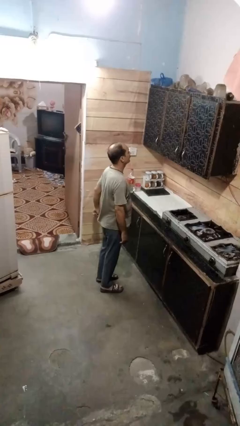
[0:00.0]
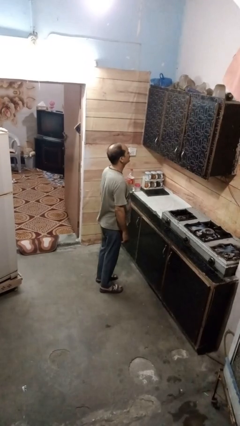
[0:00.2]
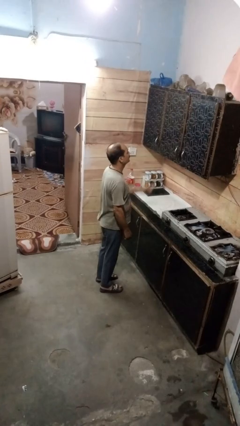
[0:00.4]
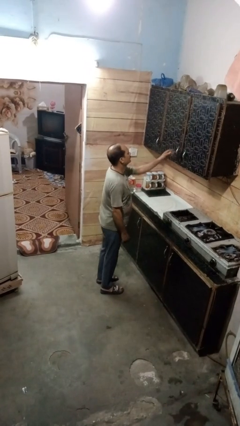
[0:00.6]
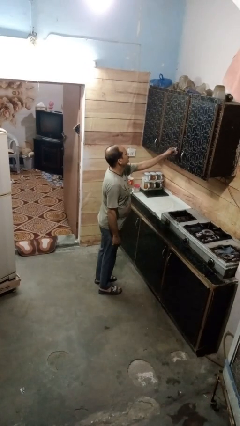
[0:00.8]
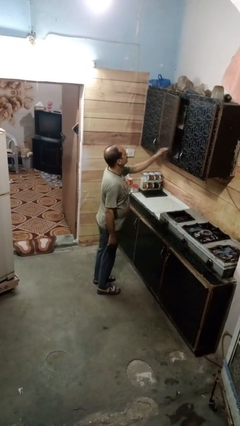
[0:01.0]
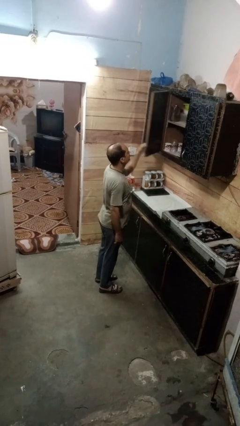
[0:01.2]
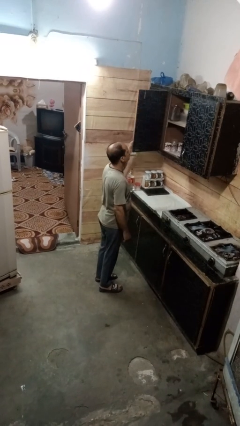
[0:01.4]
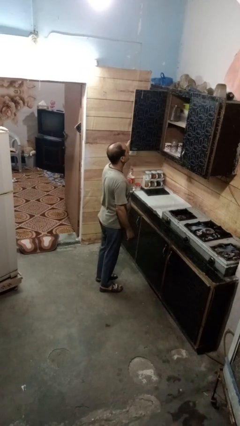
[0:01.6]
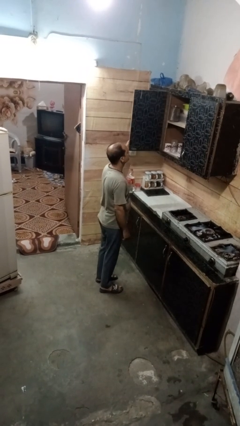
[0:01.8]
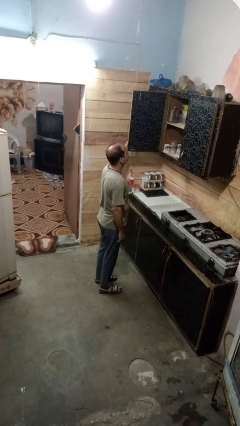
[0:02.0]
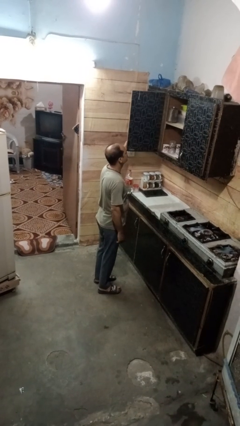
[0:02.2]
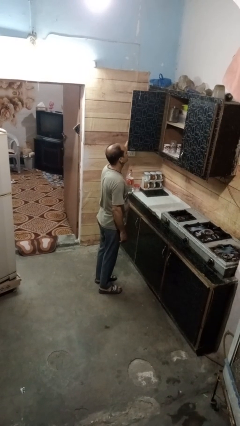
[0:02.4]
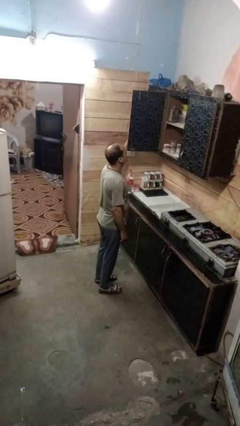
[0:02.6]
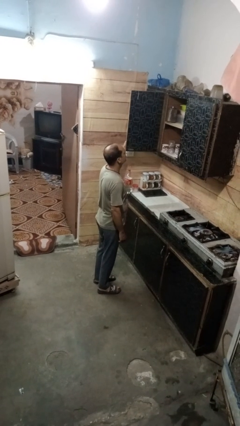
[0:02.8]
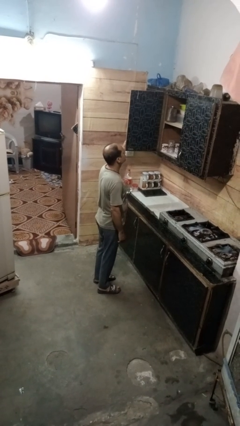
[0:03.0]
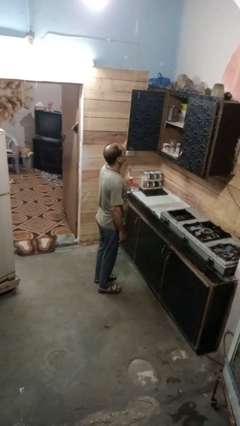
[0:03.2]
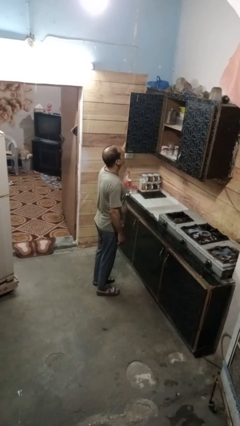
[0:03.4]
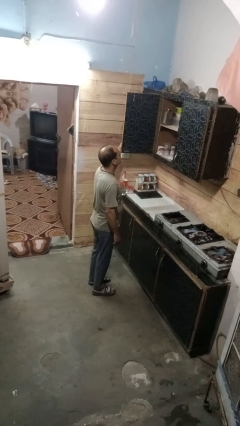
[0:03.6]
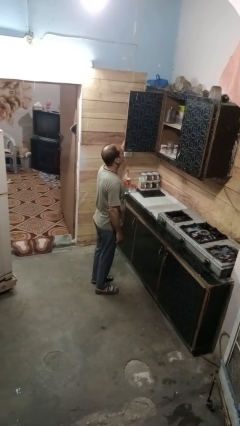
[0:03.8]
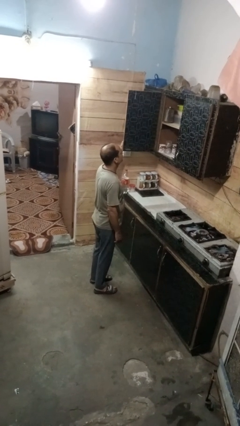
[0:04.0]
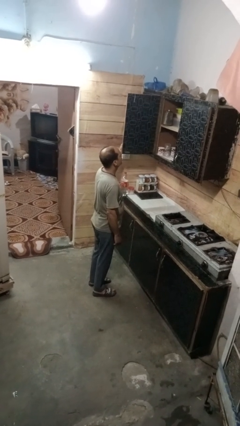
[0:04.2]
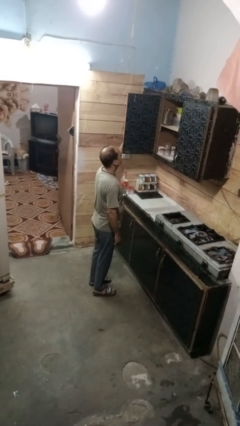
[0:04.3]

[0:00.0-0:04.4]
person opens cabinet

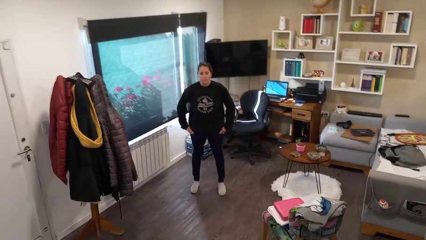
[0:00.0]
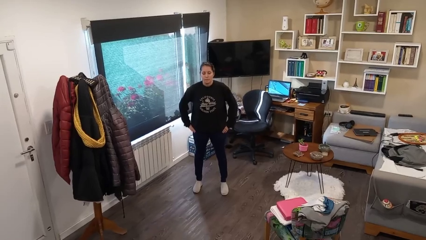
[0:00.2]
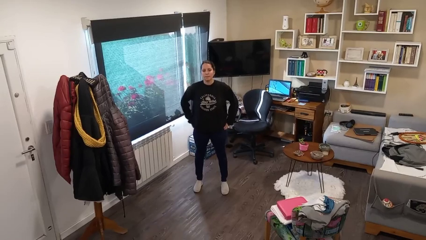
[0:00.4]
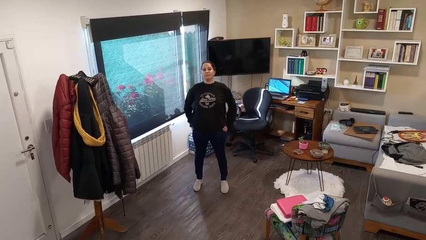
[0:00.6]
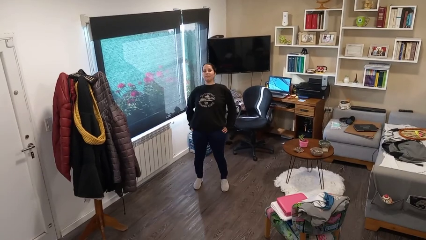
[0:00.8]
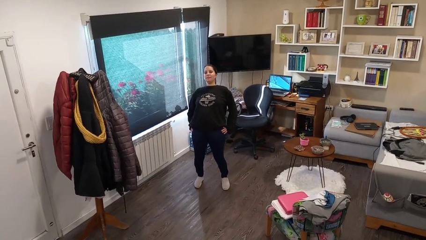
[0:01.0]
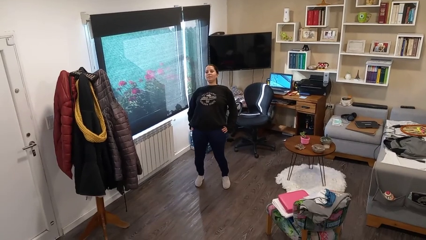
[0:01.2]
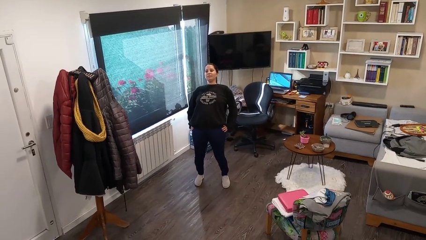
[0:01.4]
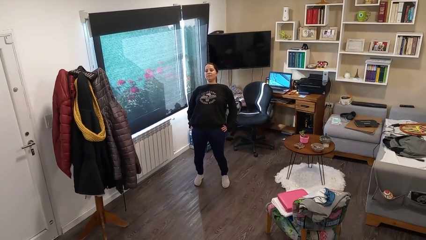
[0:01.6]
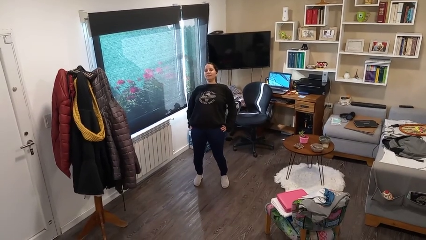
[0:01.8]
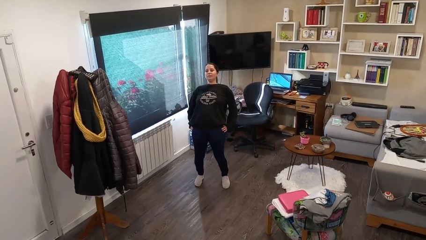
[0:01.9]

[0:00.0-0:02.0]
person stretches back

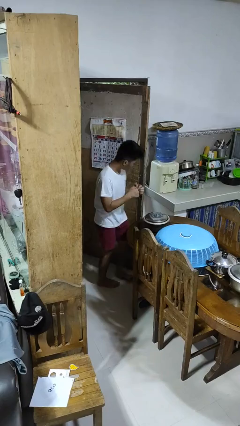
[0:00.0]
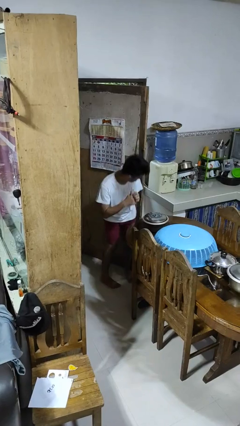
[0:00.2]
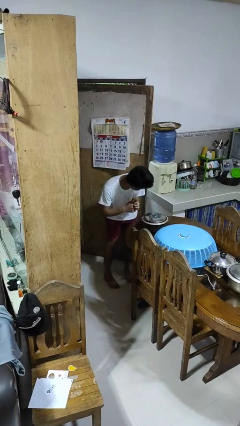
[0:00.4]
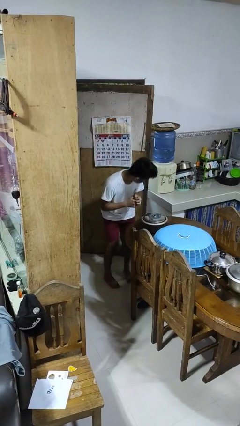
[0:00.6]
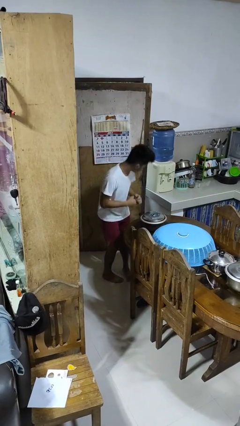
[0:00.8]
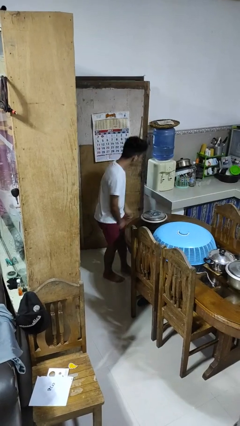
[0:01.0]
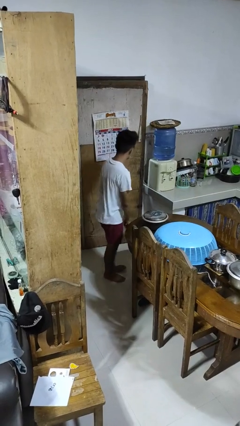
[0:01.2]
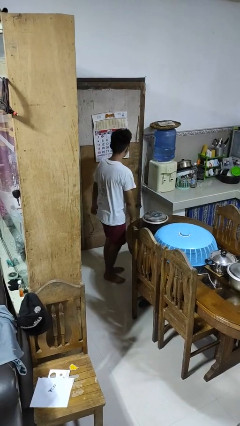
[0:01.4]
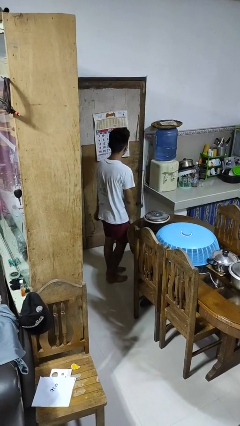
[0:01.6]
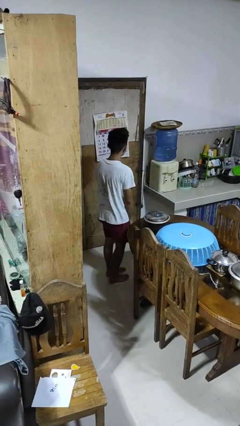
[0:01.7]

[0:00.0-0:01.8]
person closes door with hip

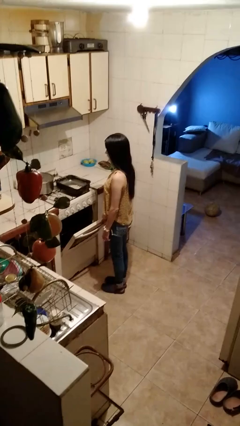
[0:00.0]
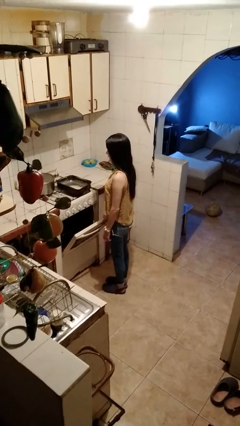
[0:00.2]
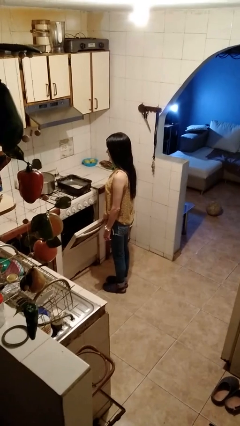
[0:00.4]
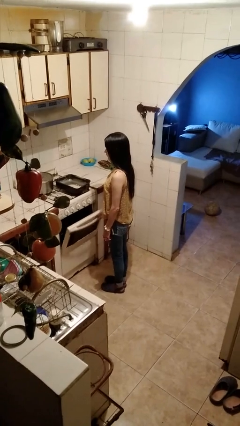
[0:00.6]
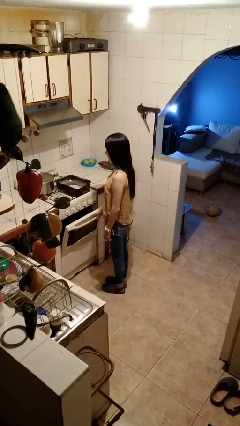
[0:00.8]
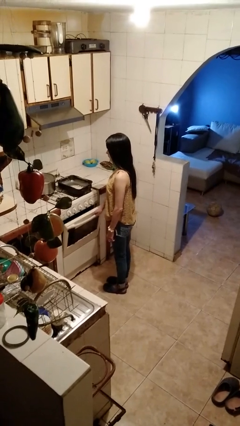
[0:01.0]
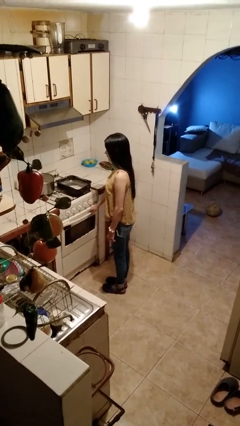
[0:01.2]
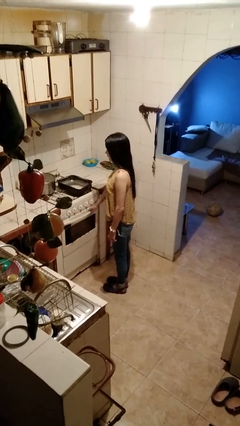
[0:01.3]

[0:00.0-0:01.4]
person closes oven door

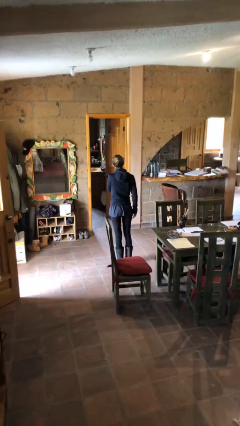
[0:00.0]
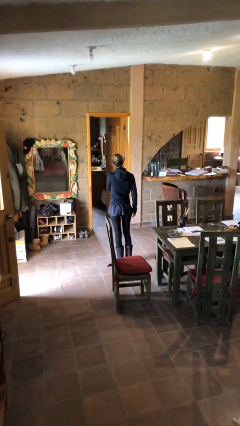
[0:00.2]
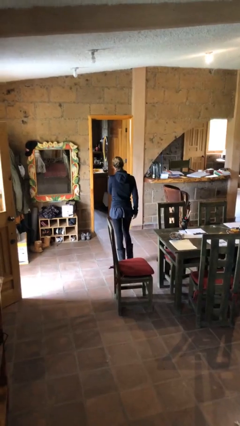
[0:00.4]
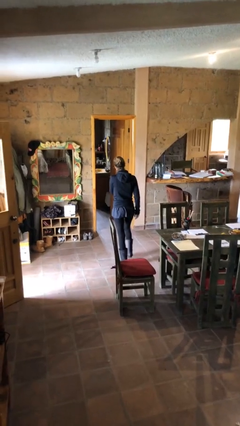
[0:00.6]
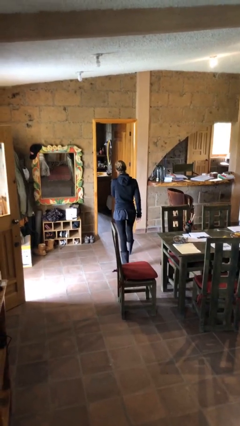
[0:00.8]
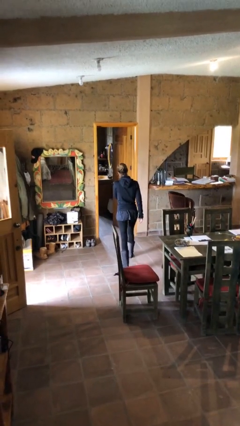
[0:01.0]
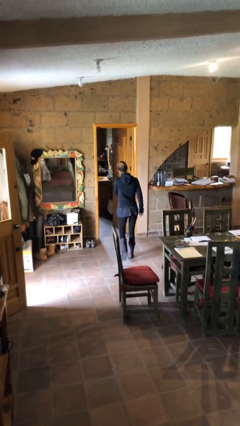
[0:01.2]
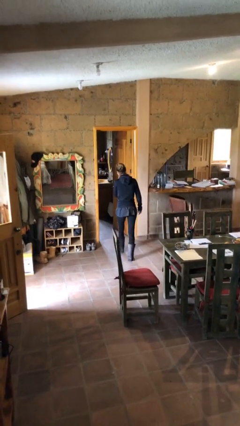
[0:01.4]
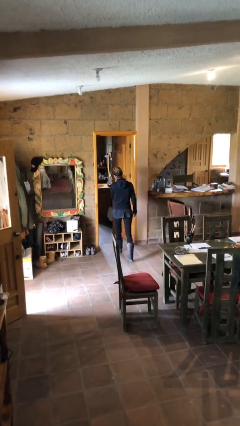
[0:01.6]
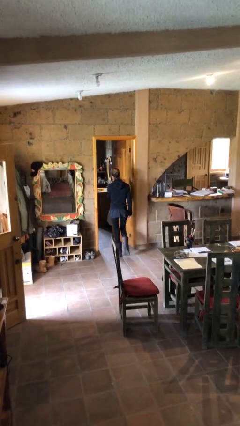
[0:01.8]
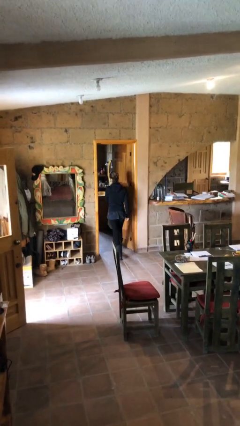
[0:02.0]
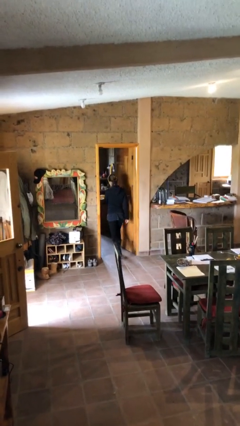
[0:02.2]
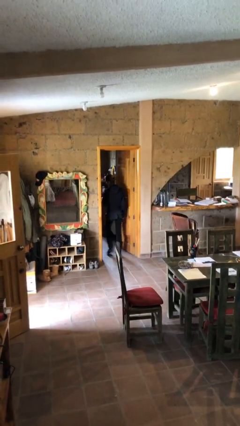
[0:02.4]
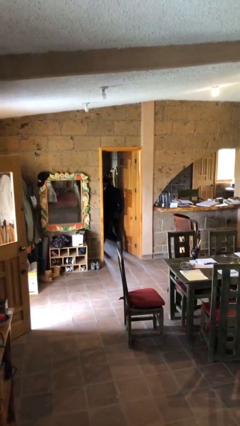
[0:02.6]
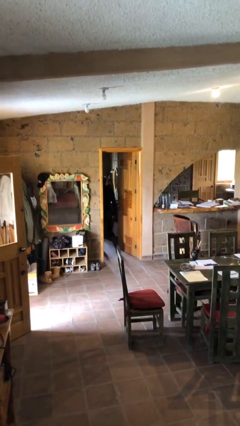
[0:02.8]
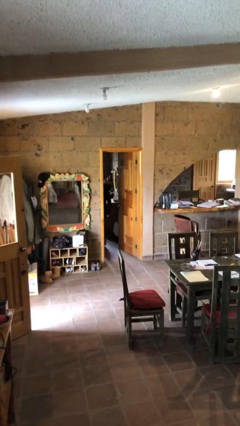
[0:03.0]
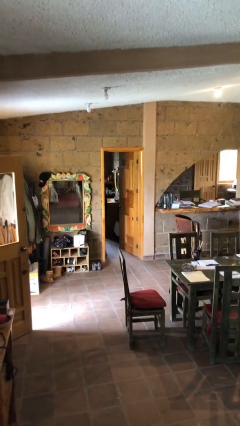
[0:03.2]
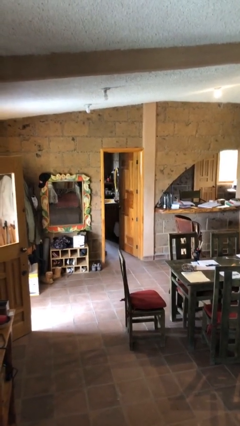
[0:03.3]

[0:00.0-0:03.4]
person exits scene through structure

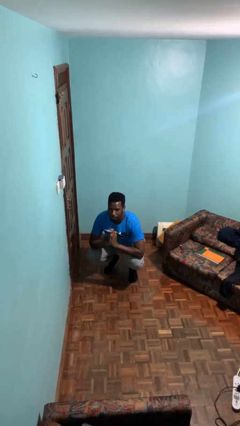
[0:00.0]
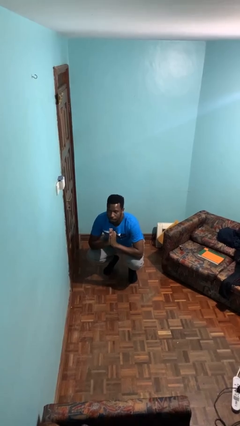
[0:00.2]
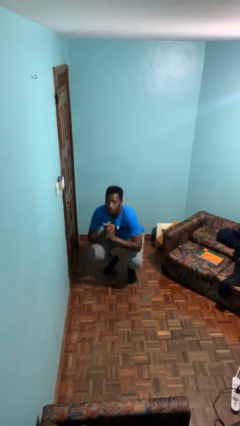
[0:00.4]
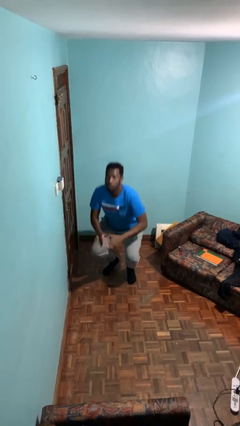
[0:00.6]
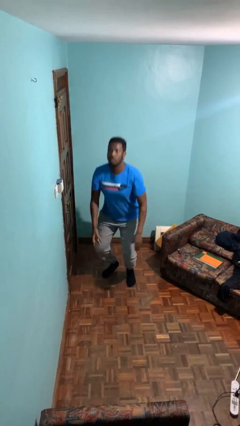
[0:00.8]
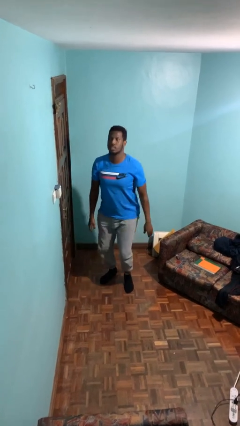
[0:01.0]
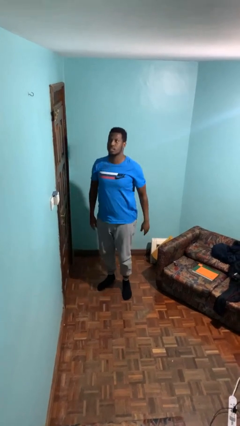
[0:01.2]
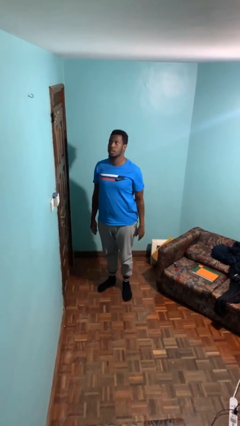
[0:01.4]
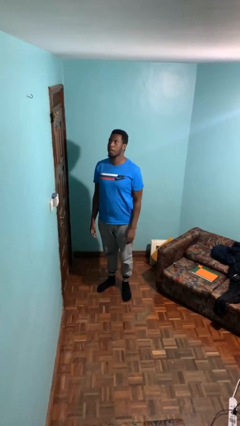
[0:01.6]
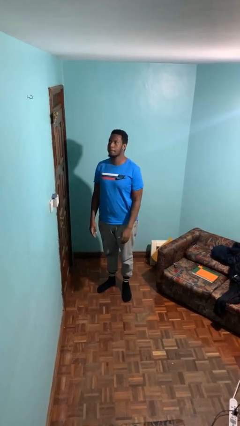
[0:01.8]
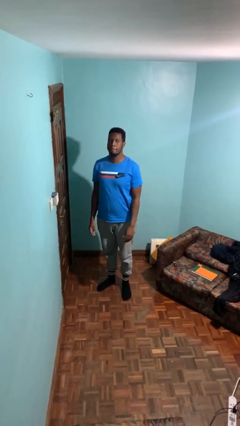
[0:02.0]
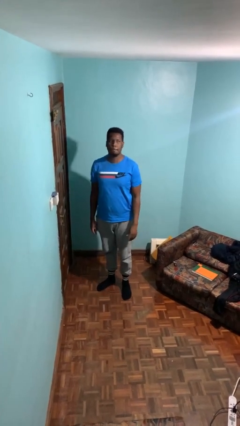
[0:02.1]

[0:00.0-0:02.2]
person stands up

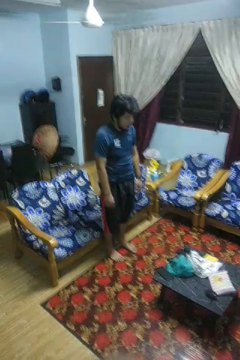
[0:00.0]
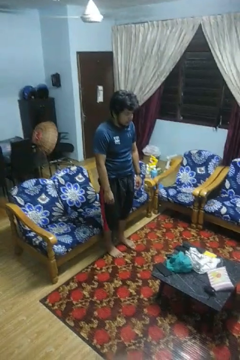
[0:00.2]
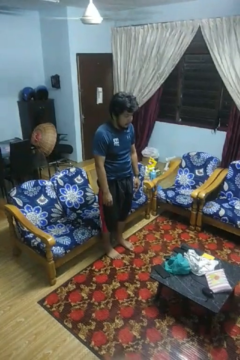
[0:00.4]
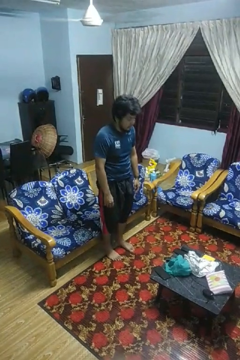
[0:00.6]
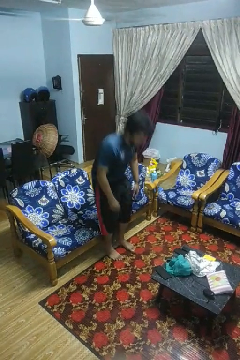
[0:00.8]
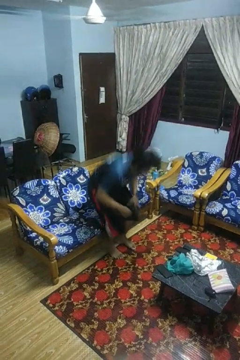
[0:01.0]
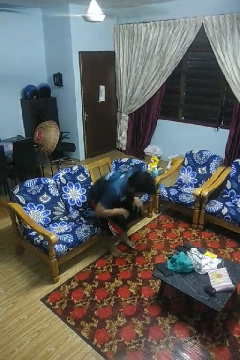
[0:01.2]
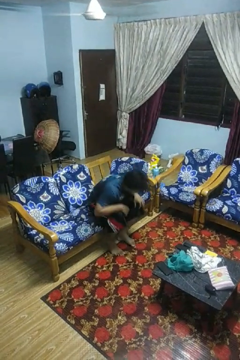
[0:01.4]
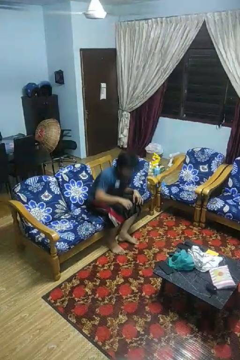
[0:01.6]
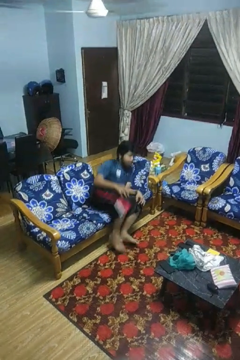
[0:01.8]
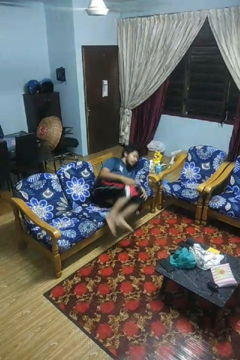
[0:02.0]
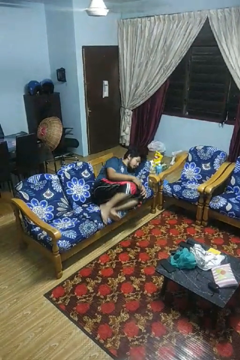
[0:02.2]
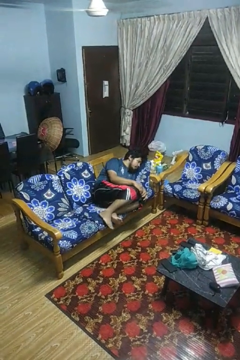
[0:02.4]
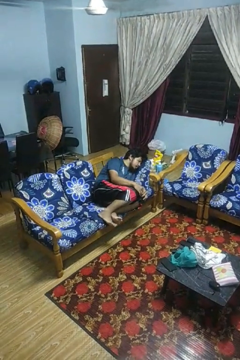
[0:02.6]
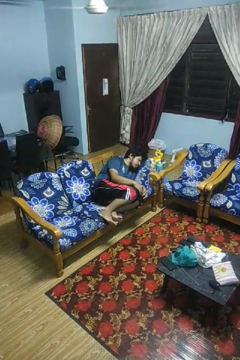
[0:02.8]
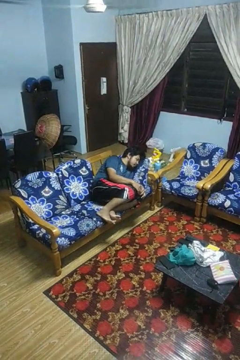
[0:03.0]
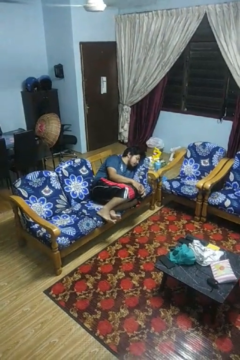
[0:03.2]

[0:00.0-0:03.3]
person lies down on couch
